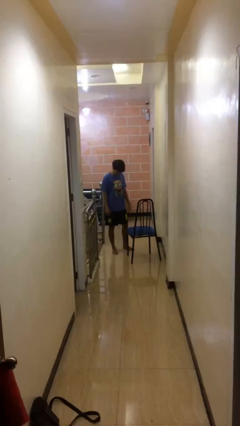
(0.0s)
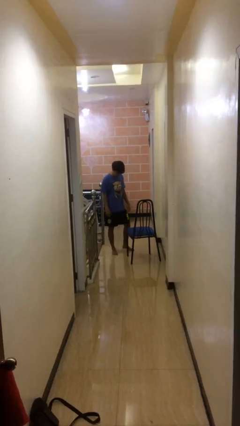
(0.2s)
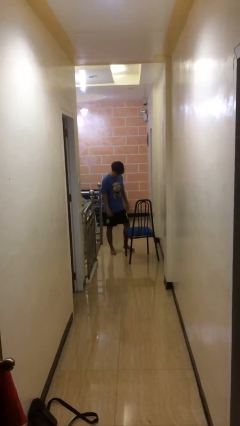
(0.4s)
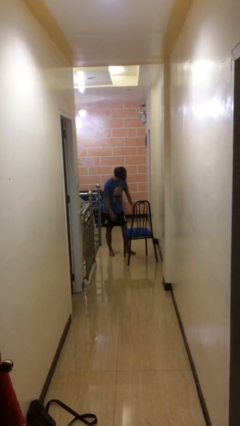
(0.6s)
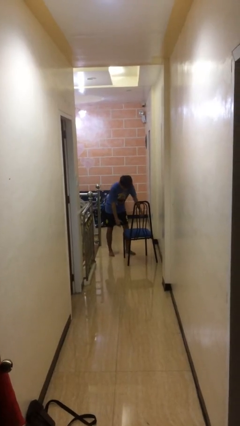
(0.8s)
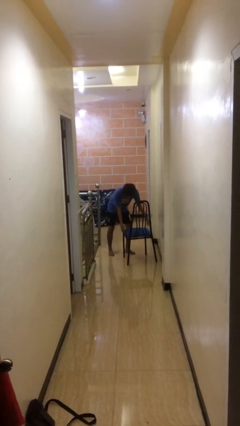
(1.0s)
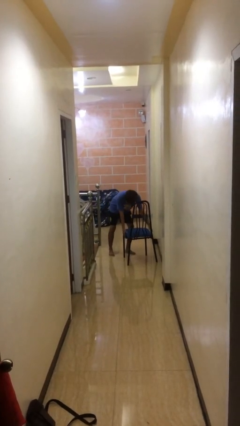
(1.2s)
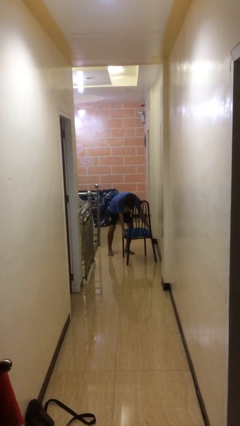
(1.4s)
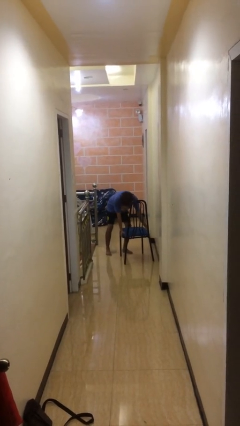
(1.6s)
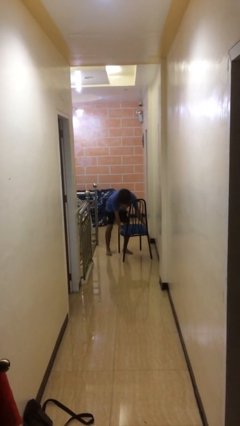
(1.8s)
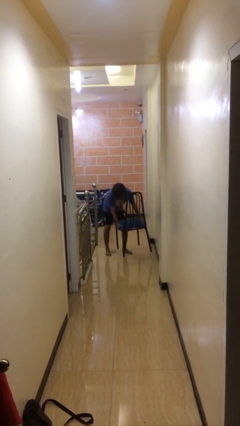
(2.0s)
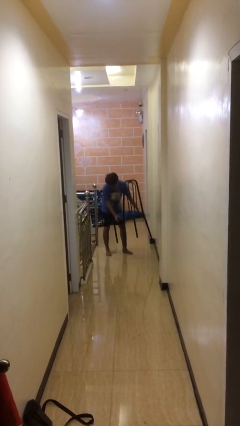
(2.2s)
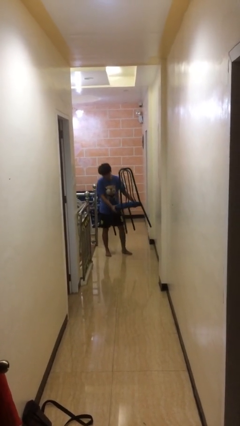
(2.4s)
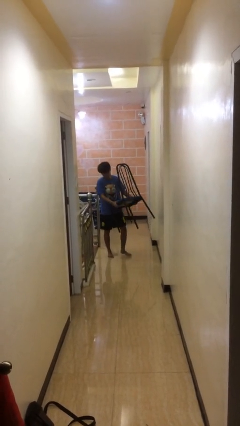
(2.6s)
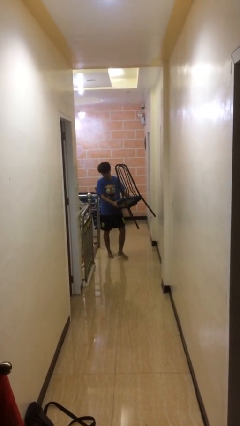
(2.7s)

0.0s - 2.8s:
person picks up object from floor

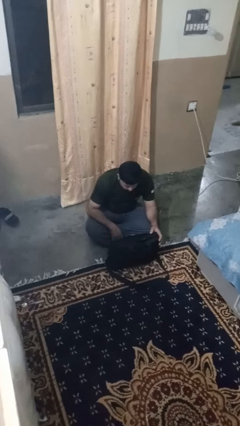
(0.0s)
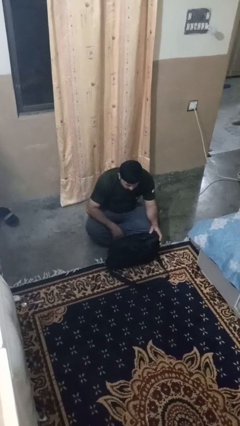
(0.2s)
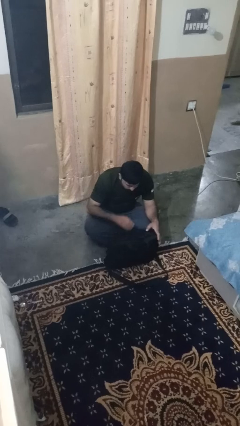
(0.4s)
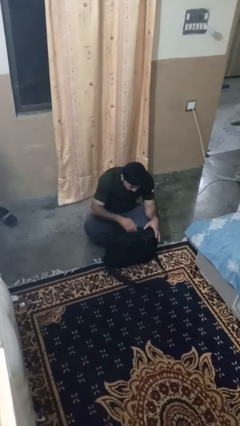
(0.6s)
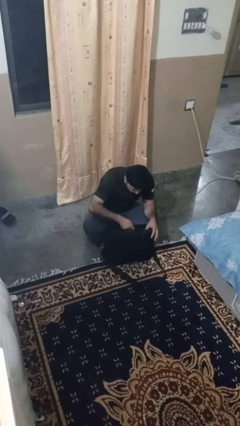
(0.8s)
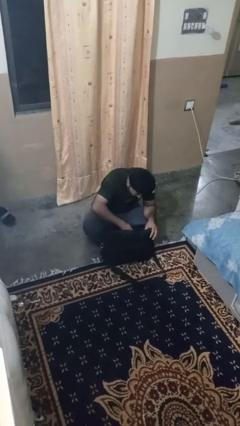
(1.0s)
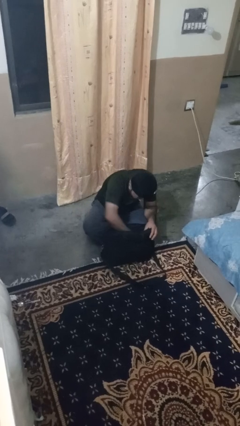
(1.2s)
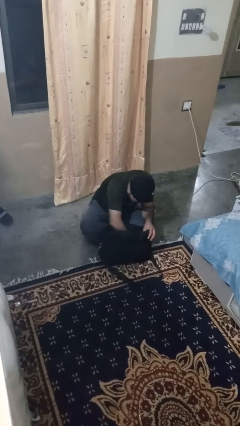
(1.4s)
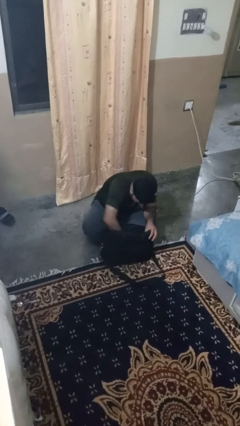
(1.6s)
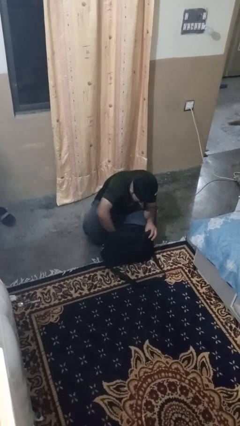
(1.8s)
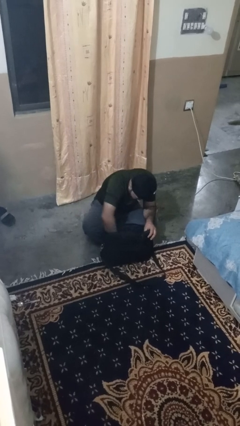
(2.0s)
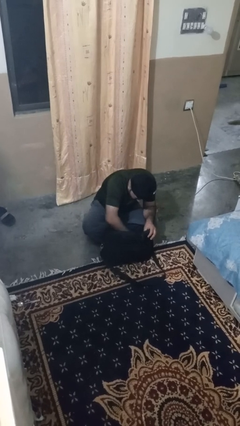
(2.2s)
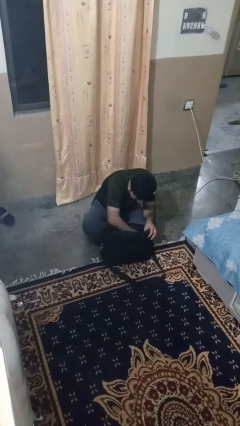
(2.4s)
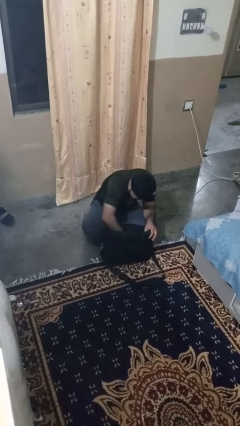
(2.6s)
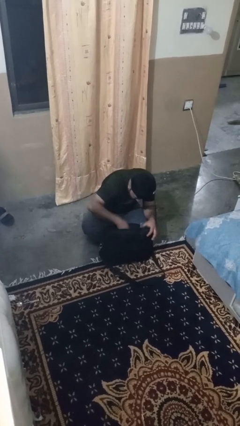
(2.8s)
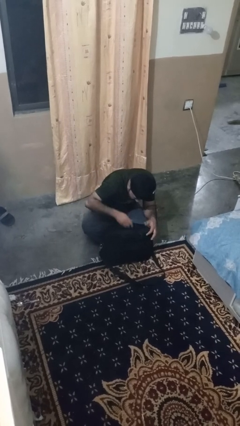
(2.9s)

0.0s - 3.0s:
person searches in bag

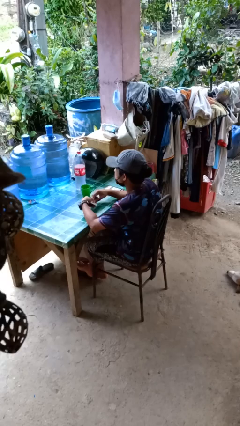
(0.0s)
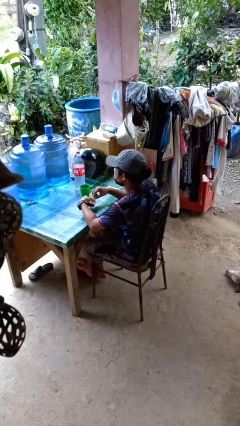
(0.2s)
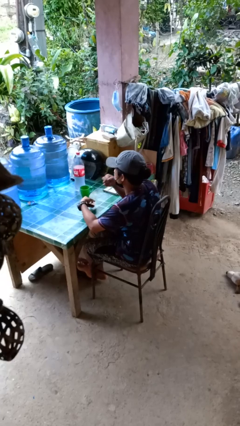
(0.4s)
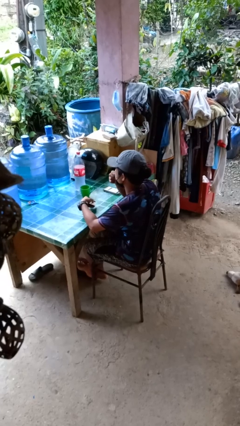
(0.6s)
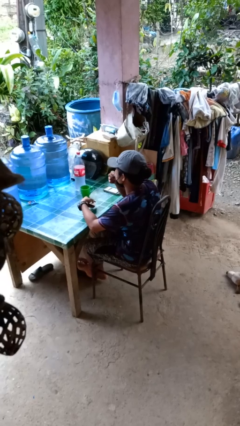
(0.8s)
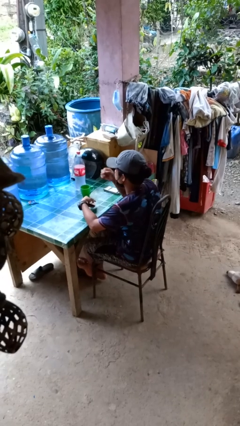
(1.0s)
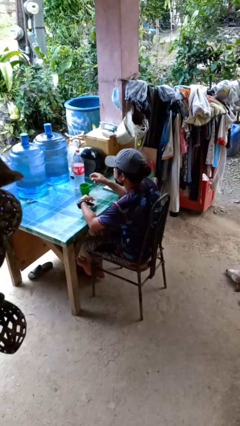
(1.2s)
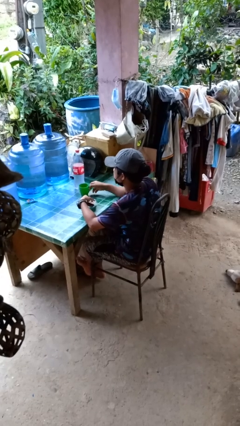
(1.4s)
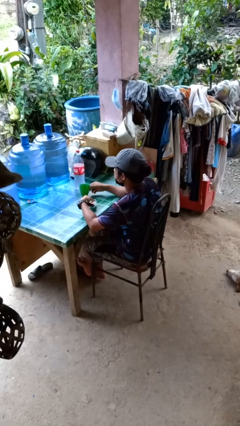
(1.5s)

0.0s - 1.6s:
person takes medicine pills

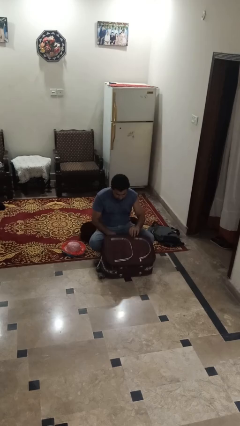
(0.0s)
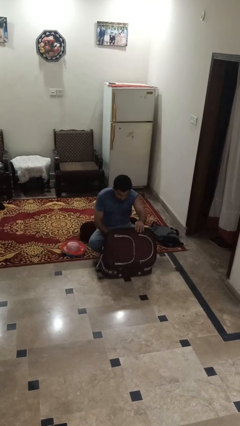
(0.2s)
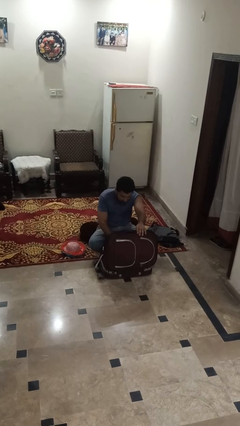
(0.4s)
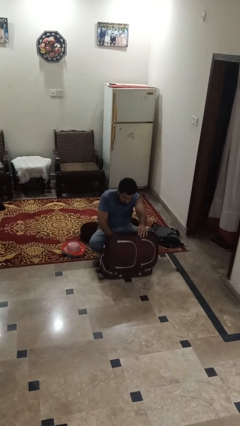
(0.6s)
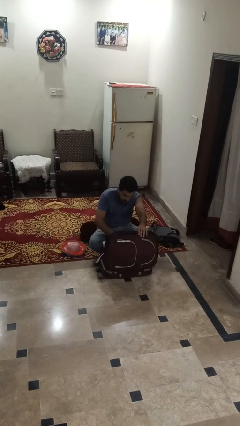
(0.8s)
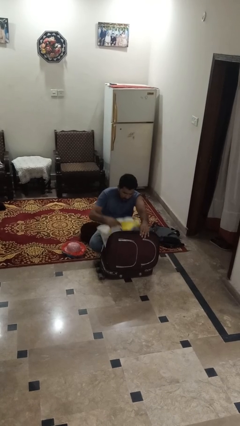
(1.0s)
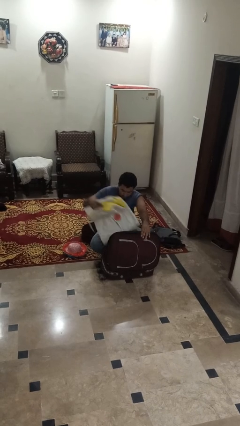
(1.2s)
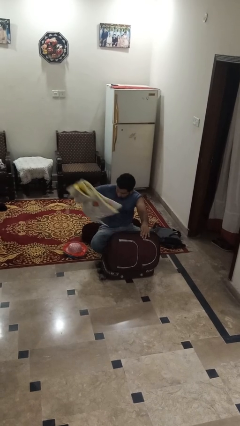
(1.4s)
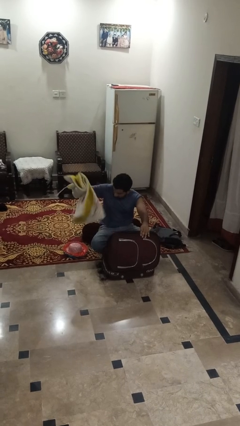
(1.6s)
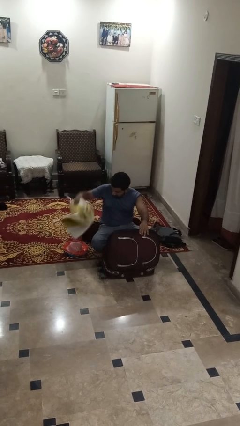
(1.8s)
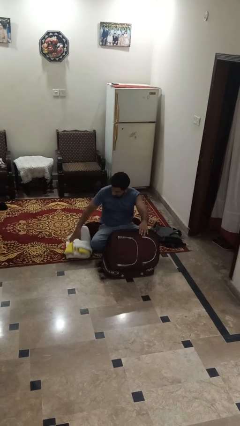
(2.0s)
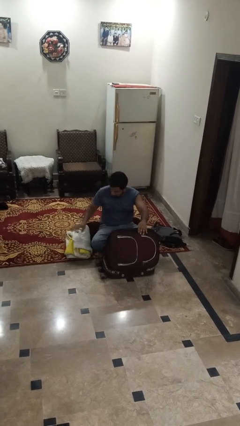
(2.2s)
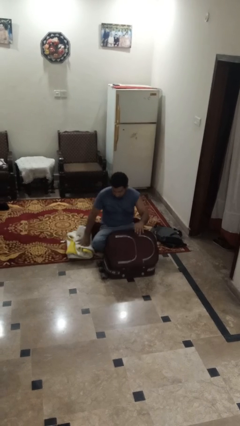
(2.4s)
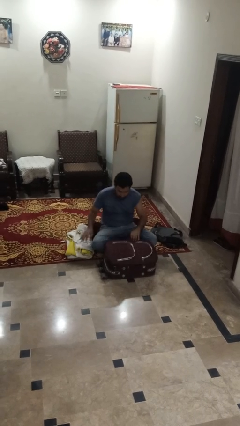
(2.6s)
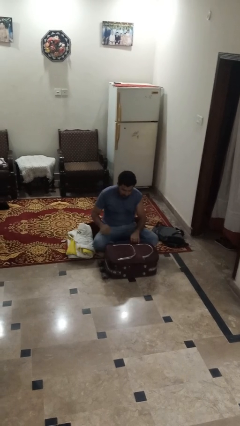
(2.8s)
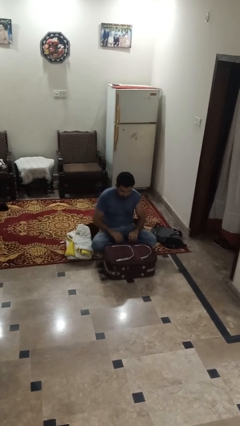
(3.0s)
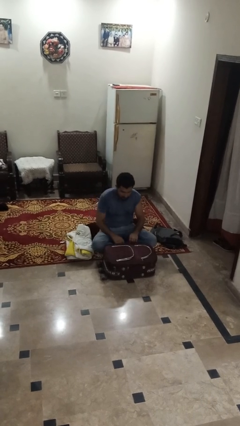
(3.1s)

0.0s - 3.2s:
person unloads clothes from suitcase

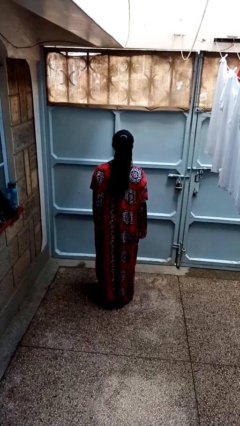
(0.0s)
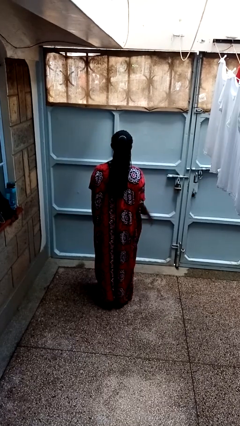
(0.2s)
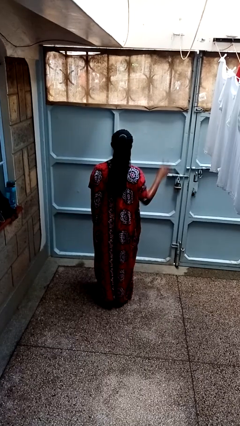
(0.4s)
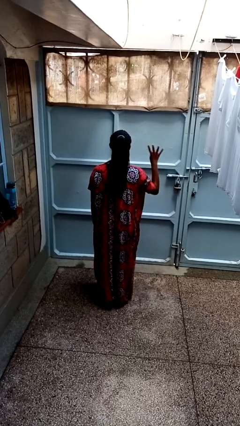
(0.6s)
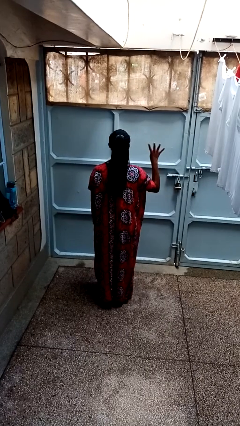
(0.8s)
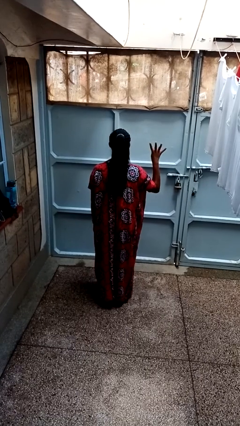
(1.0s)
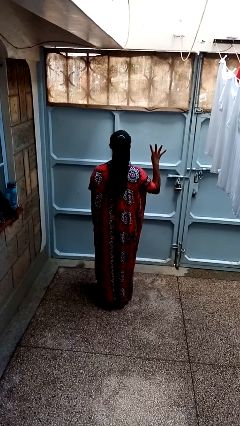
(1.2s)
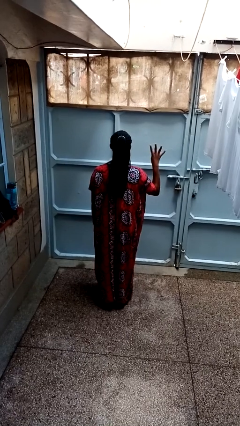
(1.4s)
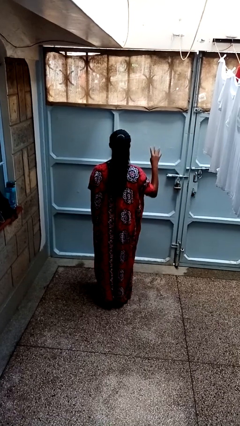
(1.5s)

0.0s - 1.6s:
person gestures number four

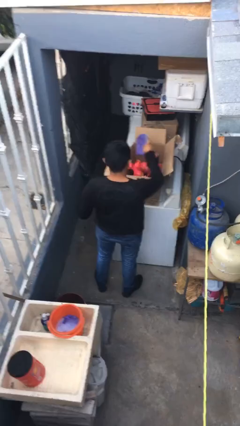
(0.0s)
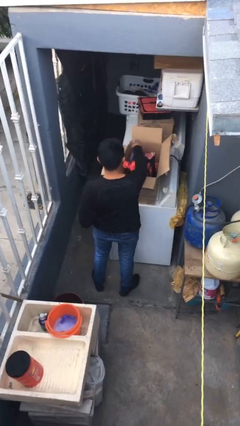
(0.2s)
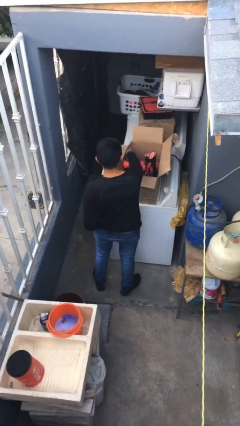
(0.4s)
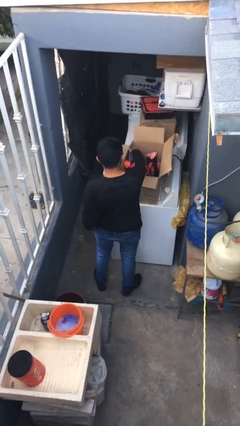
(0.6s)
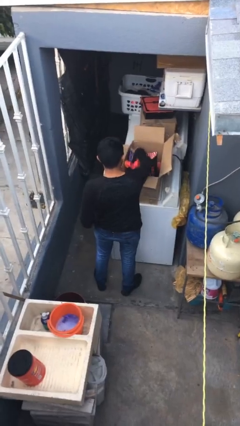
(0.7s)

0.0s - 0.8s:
person puts object into box

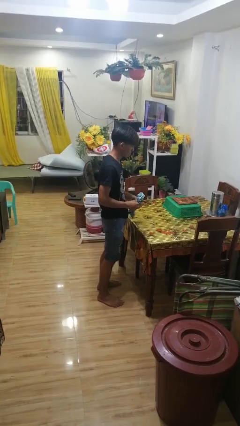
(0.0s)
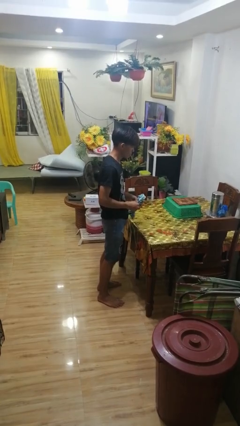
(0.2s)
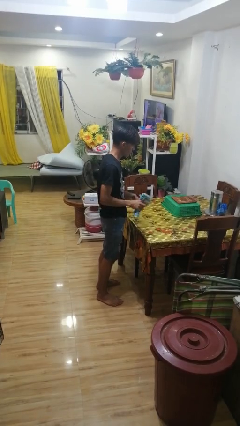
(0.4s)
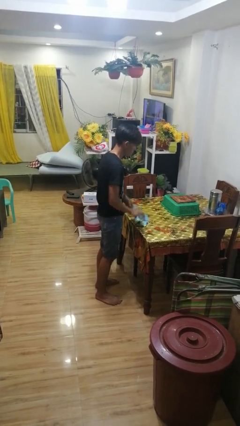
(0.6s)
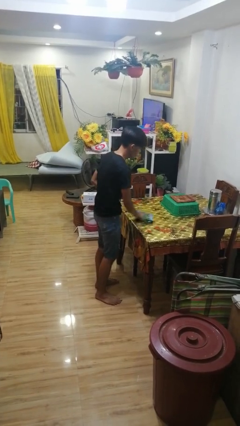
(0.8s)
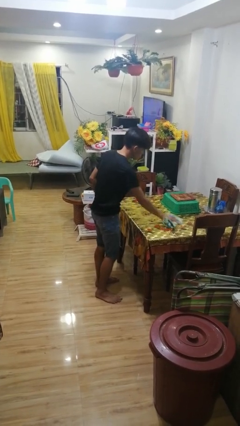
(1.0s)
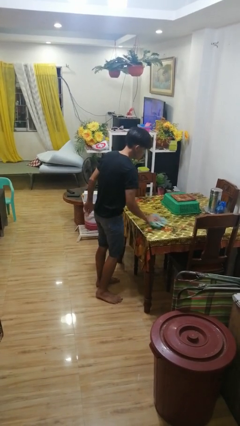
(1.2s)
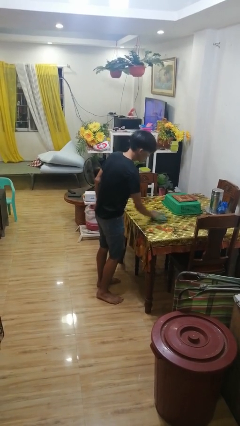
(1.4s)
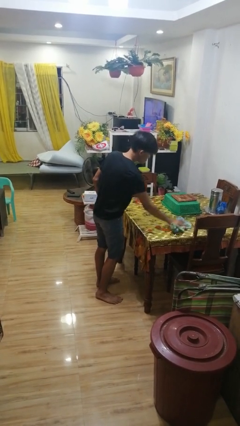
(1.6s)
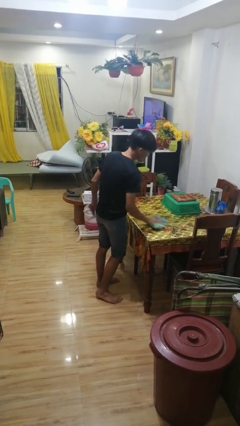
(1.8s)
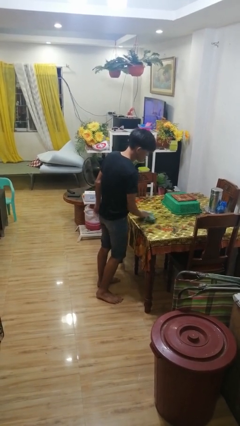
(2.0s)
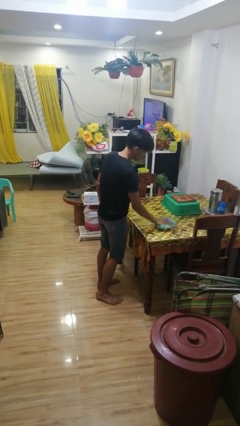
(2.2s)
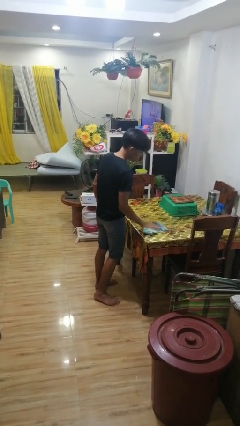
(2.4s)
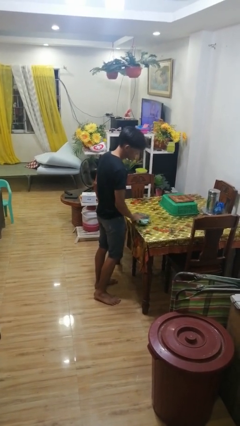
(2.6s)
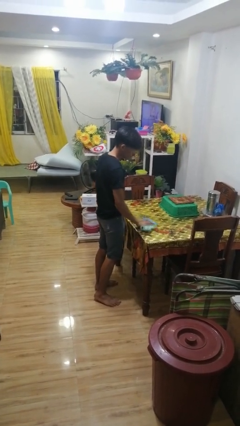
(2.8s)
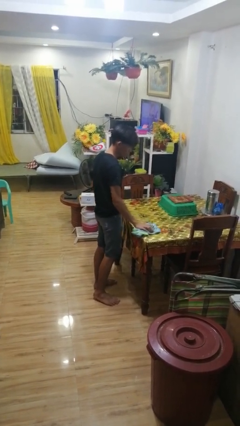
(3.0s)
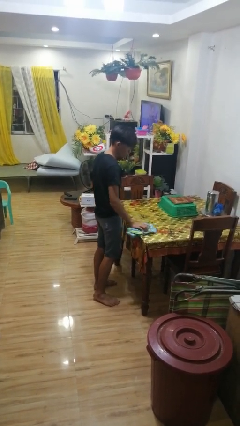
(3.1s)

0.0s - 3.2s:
person cleans table with rag

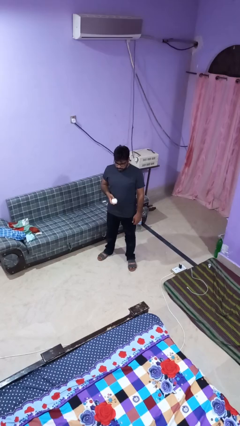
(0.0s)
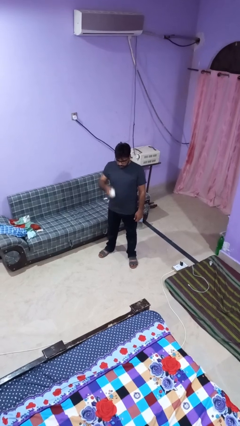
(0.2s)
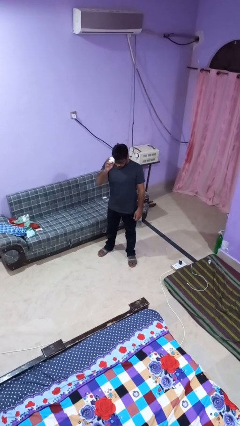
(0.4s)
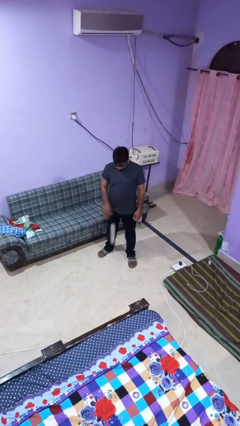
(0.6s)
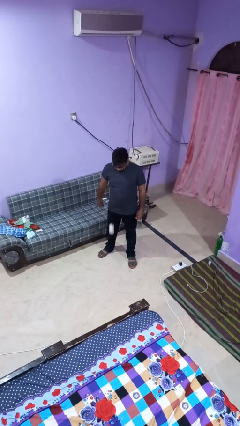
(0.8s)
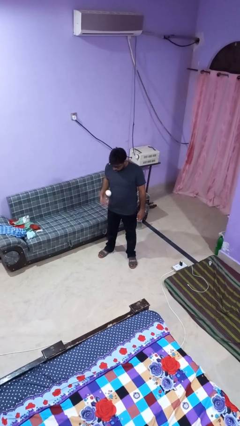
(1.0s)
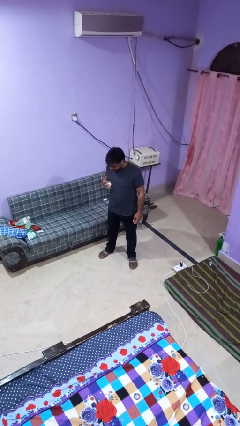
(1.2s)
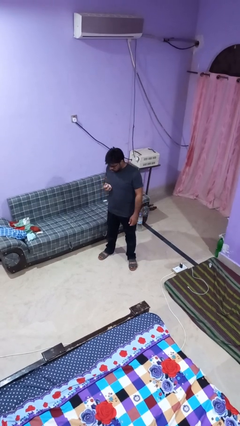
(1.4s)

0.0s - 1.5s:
person bounces ball on floor
